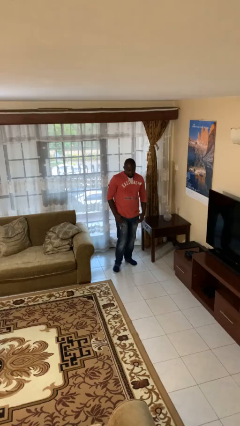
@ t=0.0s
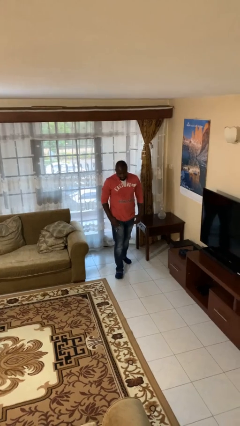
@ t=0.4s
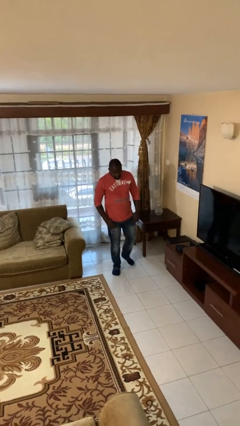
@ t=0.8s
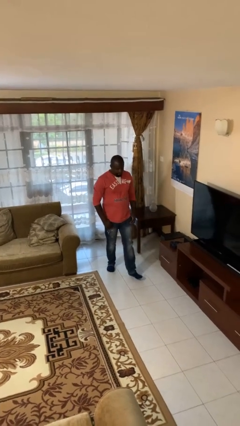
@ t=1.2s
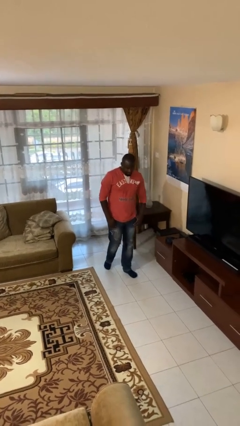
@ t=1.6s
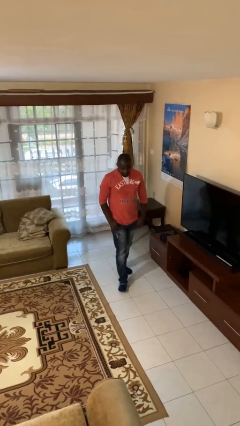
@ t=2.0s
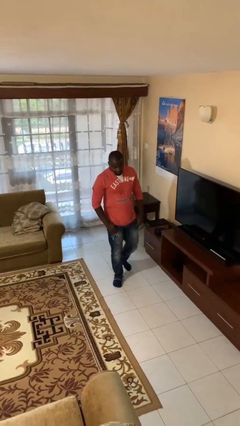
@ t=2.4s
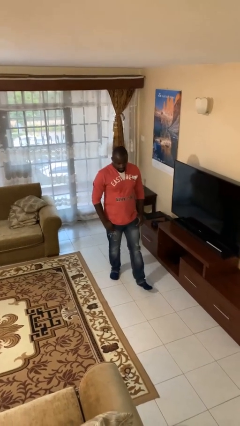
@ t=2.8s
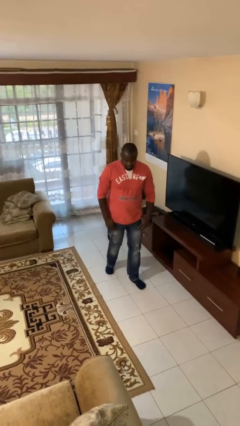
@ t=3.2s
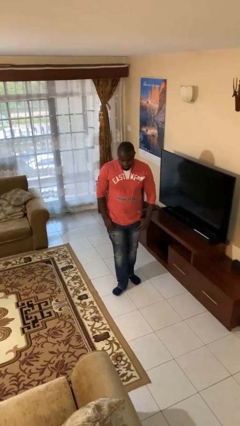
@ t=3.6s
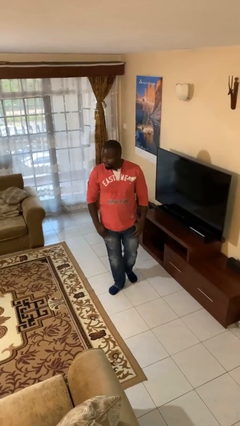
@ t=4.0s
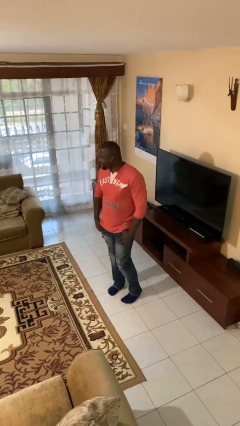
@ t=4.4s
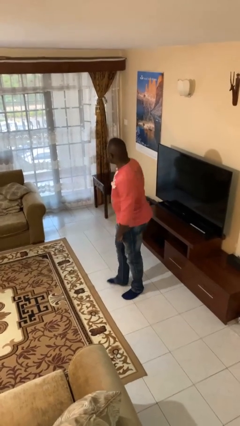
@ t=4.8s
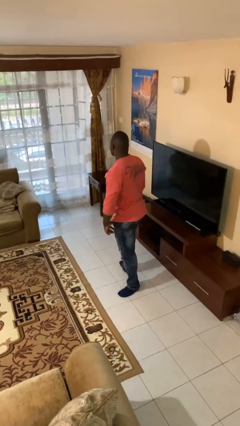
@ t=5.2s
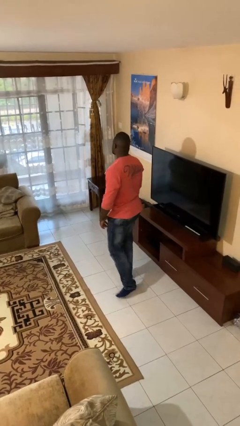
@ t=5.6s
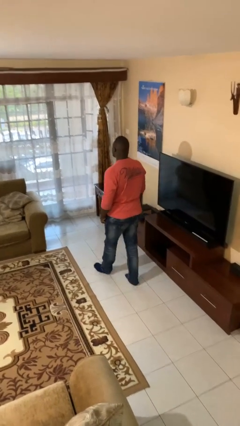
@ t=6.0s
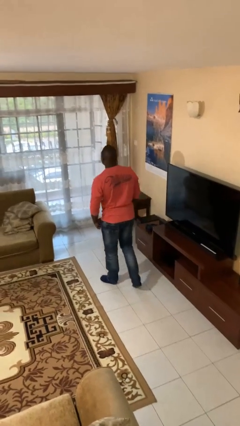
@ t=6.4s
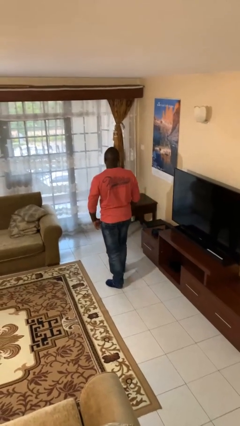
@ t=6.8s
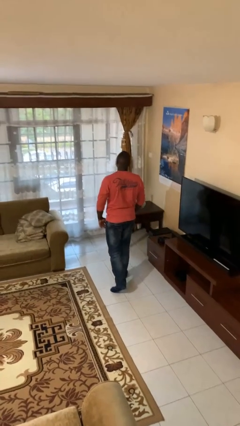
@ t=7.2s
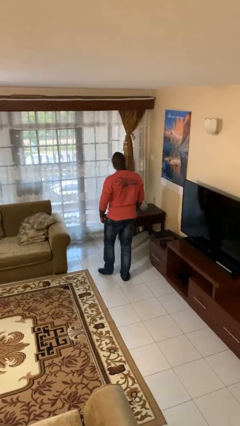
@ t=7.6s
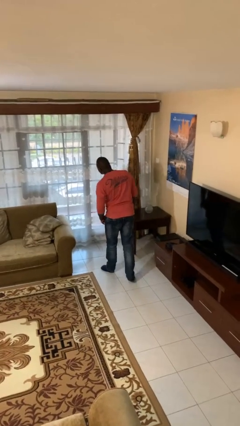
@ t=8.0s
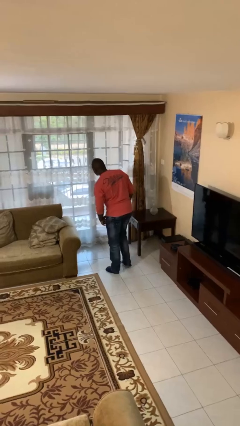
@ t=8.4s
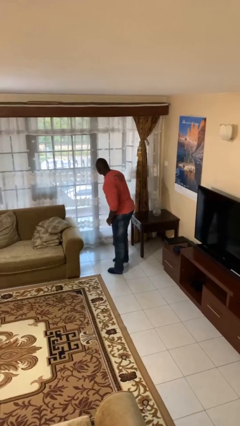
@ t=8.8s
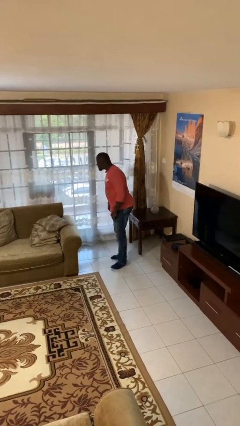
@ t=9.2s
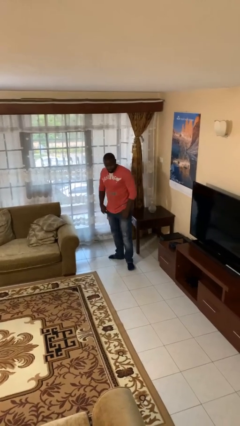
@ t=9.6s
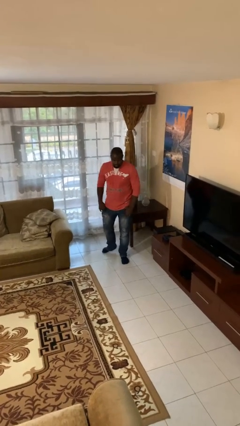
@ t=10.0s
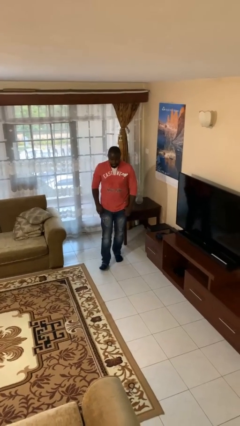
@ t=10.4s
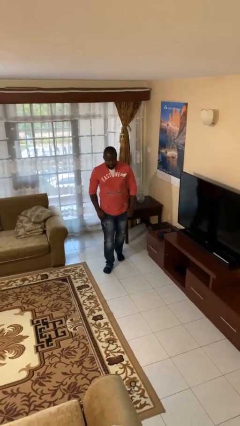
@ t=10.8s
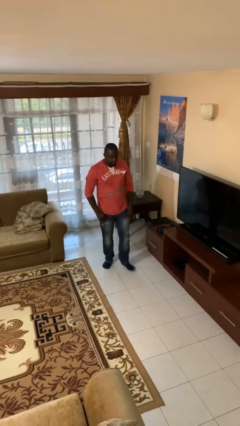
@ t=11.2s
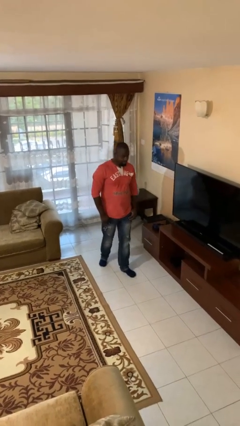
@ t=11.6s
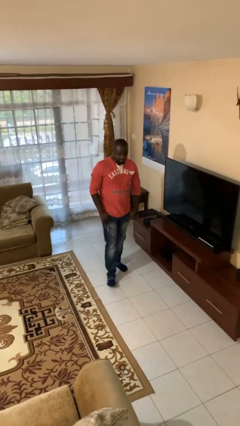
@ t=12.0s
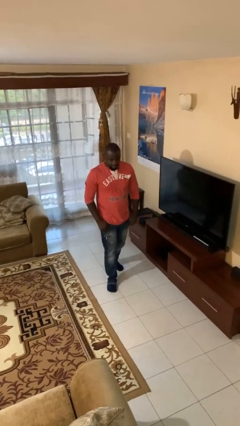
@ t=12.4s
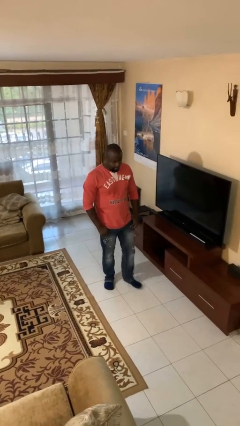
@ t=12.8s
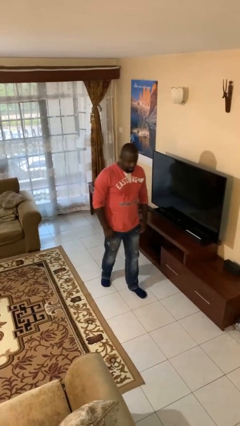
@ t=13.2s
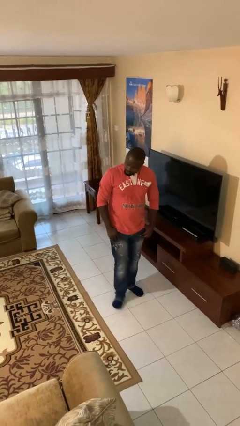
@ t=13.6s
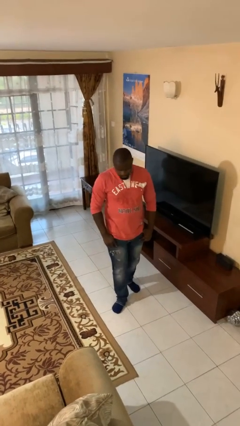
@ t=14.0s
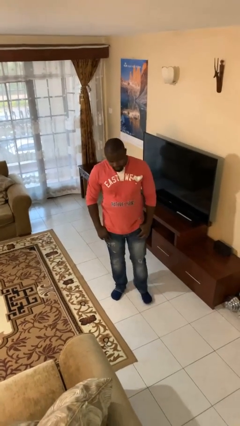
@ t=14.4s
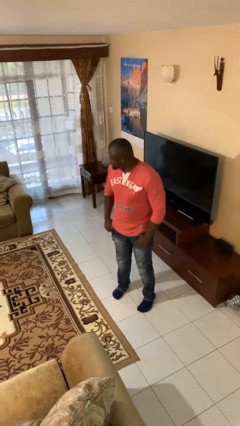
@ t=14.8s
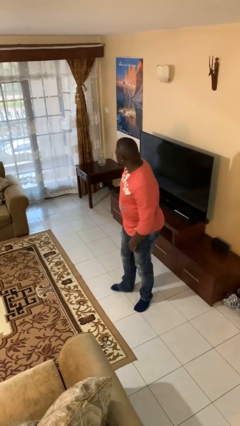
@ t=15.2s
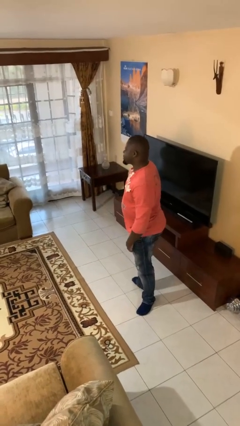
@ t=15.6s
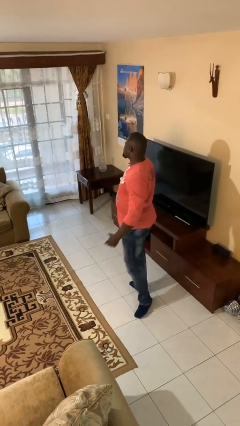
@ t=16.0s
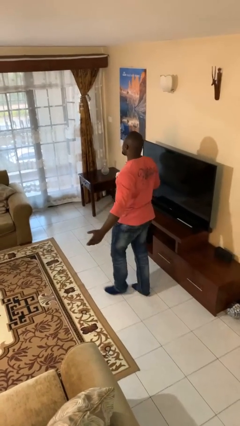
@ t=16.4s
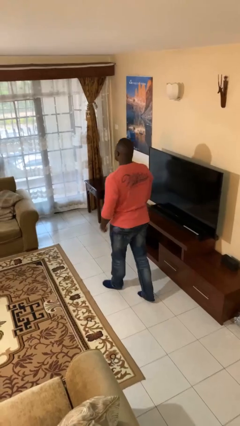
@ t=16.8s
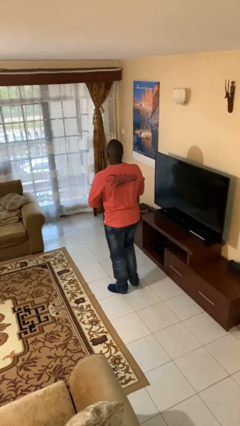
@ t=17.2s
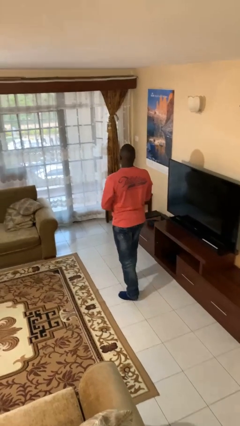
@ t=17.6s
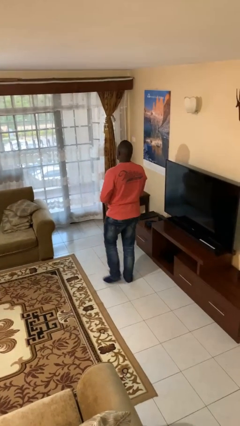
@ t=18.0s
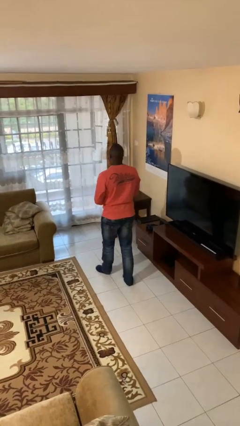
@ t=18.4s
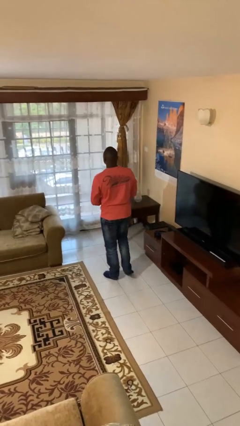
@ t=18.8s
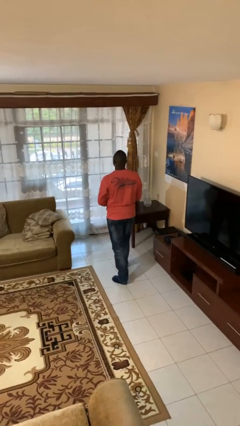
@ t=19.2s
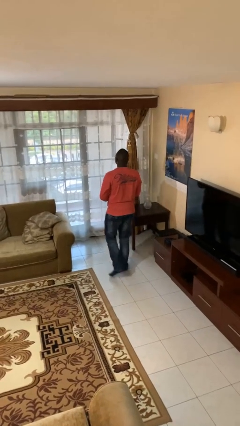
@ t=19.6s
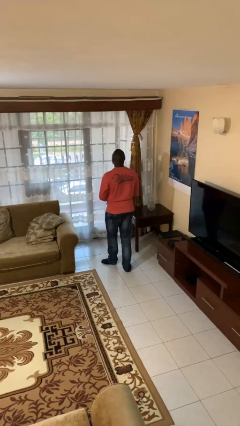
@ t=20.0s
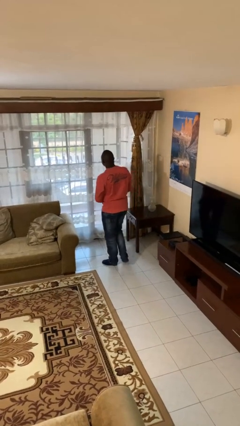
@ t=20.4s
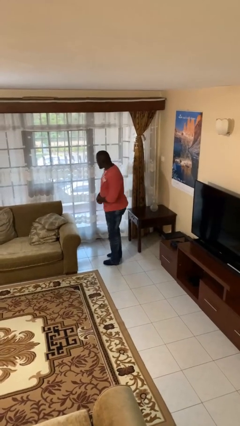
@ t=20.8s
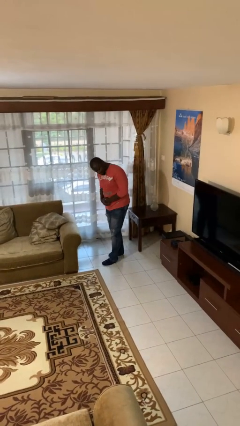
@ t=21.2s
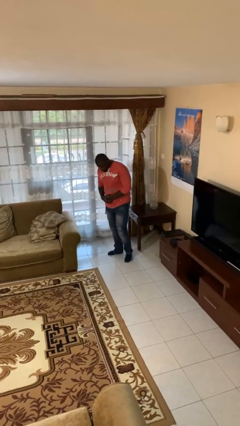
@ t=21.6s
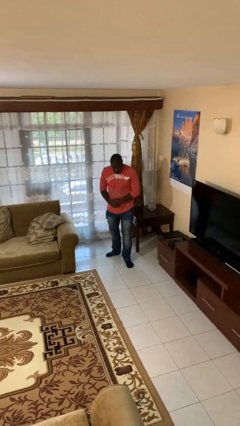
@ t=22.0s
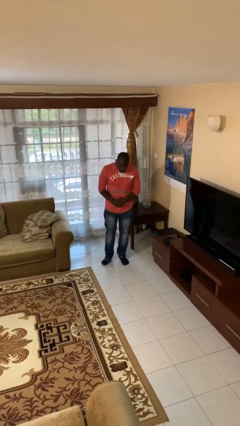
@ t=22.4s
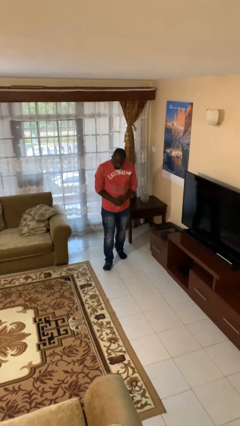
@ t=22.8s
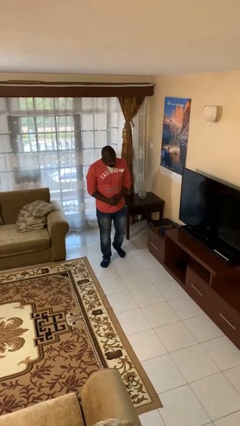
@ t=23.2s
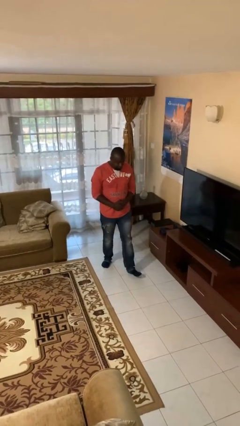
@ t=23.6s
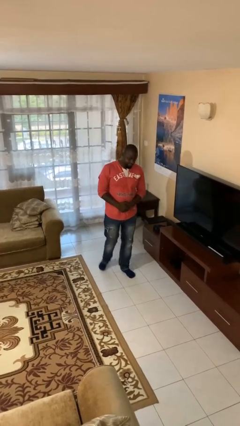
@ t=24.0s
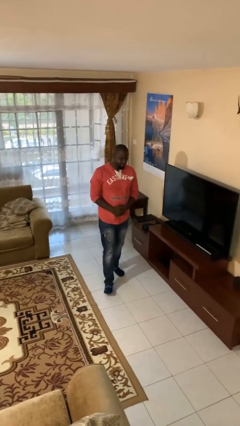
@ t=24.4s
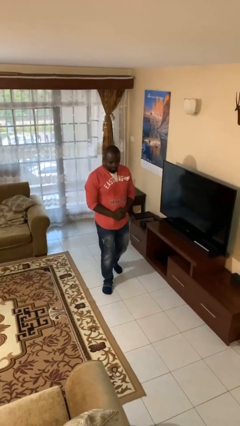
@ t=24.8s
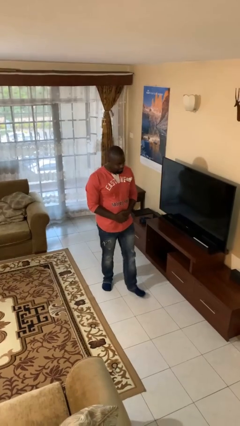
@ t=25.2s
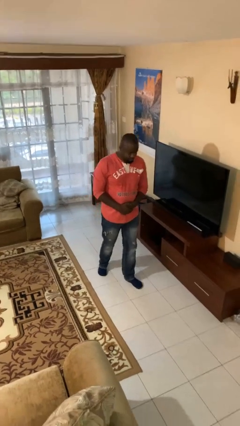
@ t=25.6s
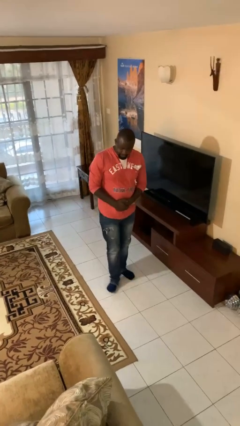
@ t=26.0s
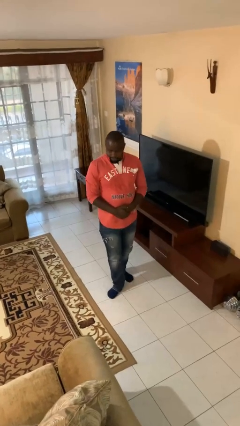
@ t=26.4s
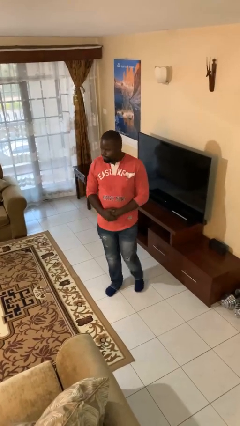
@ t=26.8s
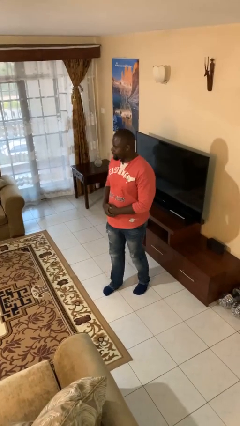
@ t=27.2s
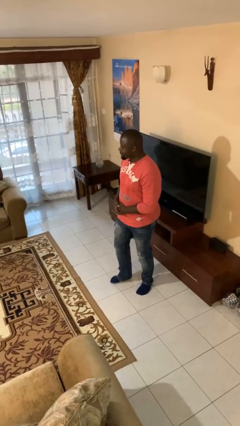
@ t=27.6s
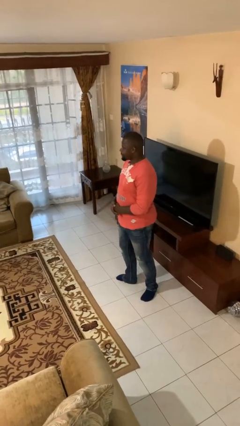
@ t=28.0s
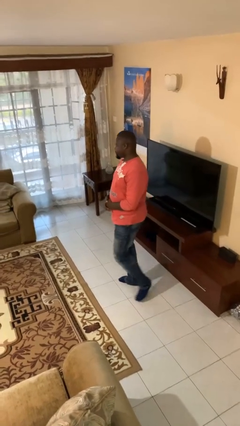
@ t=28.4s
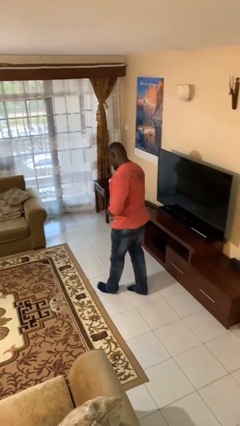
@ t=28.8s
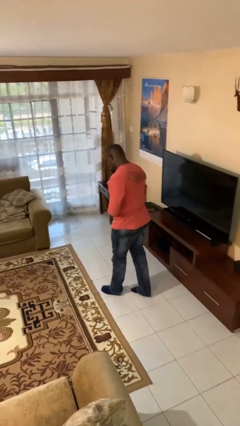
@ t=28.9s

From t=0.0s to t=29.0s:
person walks

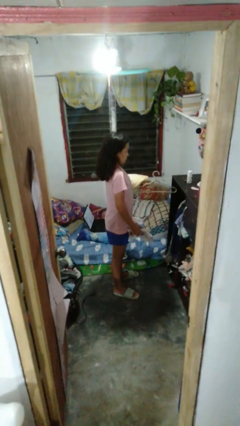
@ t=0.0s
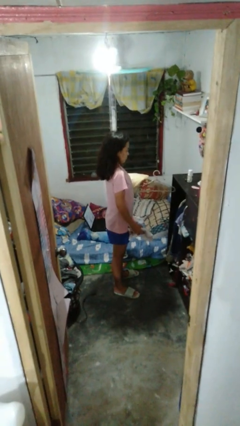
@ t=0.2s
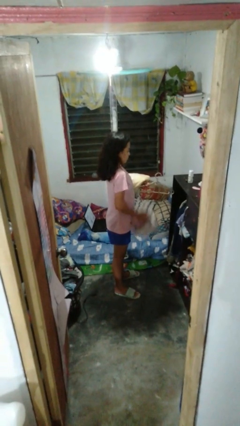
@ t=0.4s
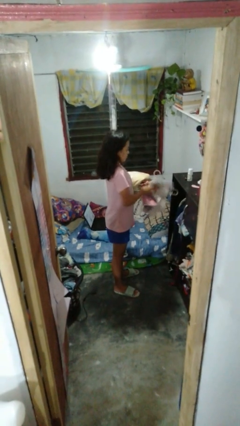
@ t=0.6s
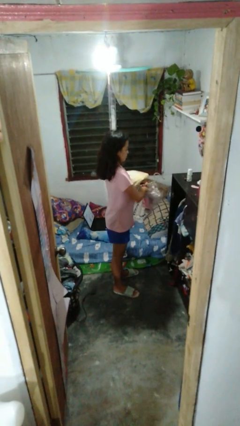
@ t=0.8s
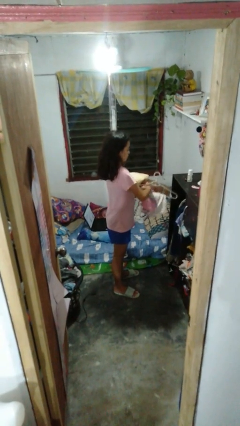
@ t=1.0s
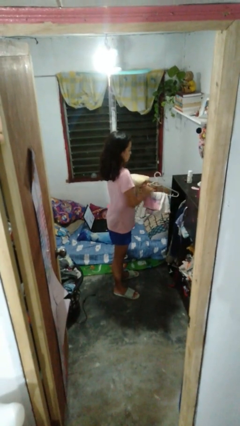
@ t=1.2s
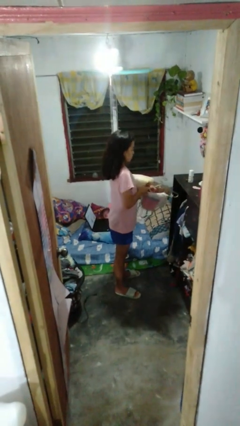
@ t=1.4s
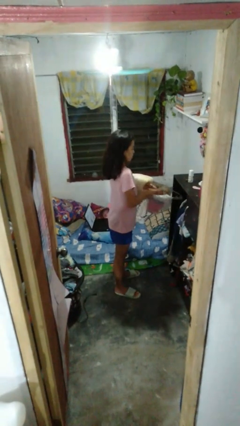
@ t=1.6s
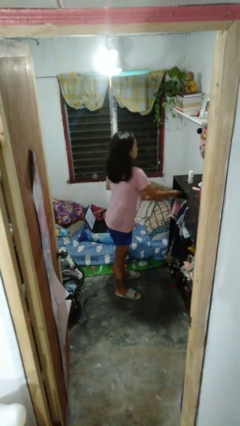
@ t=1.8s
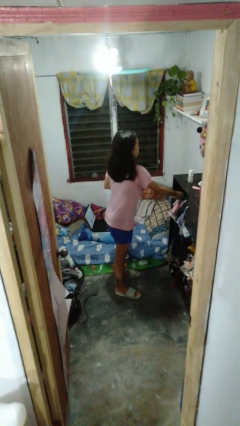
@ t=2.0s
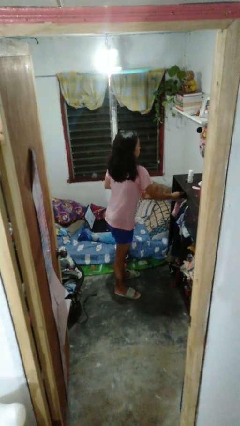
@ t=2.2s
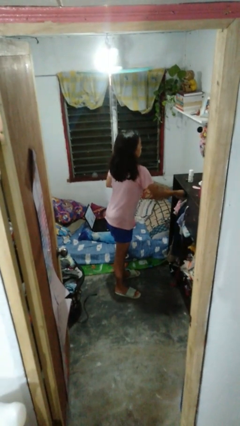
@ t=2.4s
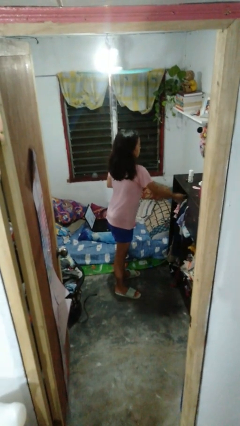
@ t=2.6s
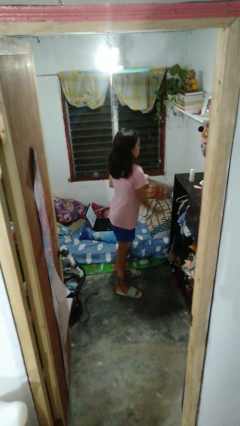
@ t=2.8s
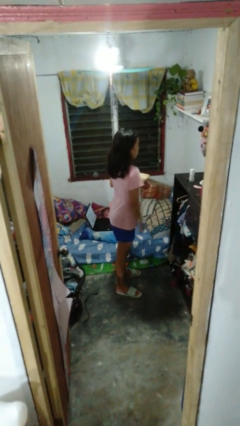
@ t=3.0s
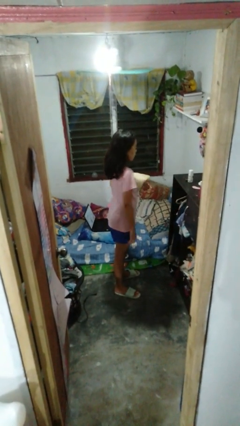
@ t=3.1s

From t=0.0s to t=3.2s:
person puts clothes into closet
